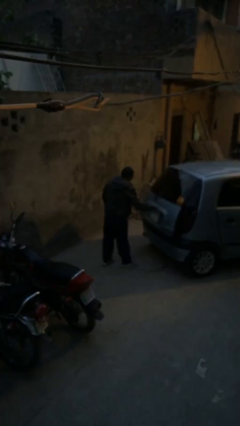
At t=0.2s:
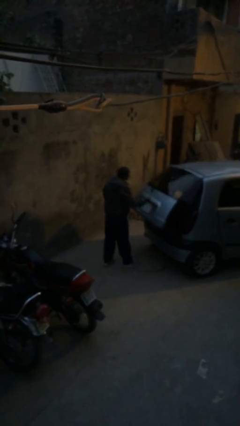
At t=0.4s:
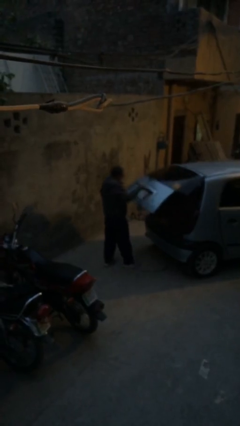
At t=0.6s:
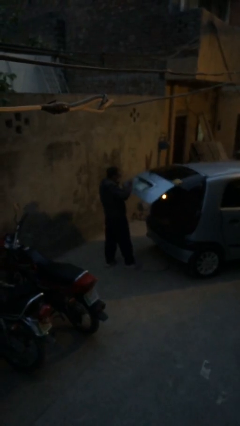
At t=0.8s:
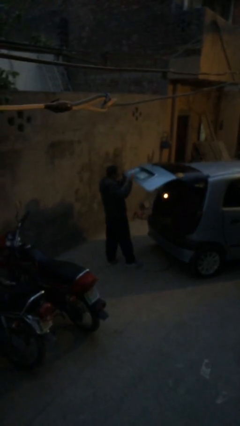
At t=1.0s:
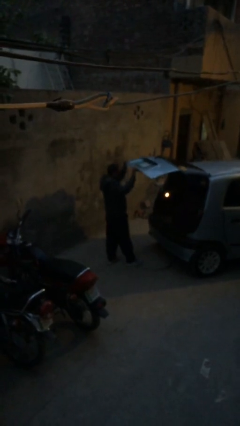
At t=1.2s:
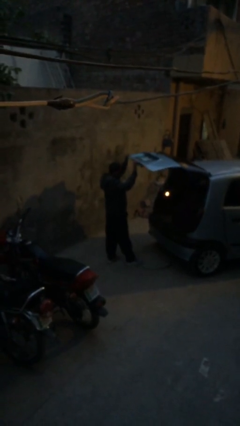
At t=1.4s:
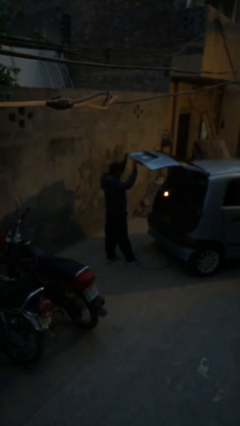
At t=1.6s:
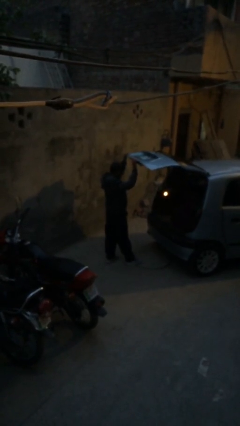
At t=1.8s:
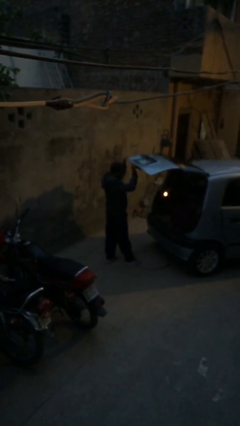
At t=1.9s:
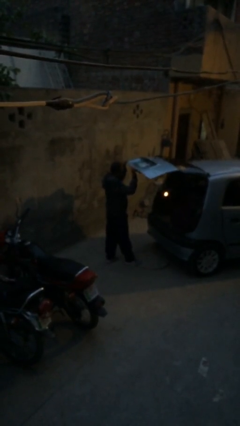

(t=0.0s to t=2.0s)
person opens car trunk

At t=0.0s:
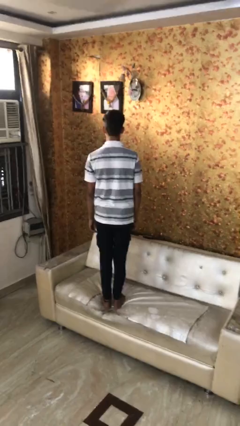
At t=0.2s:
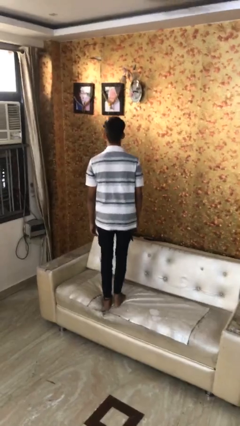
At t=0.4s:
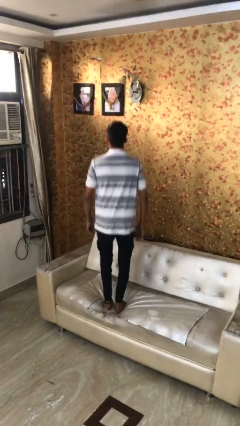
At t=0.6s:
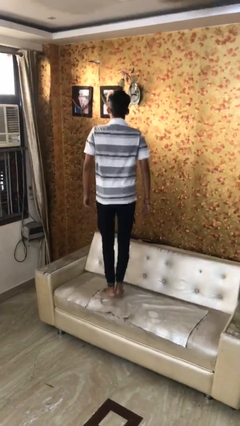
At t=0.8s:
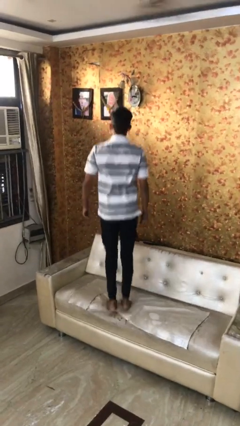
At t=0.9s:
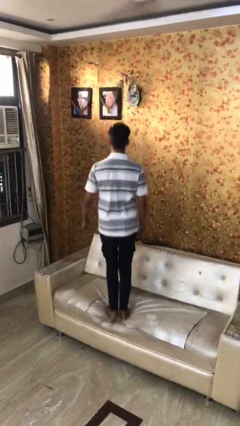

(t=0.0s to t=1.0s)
person jumps on bed

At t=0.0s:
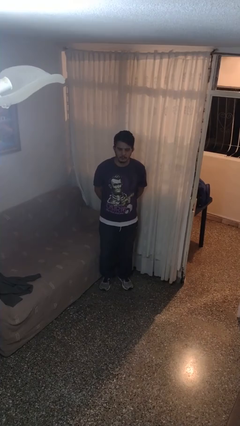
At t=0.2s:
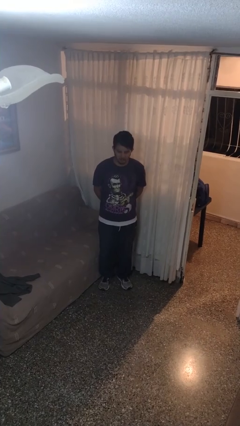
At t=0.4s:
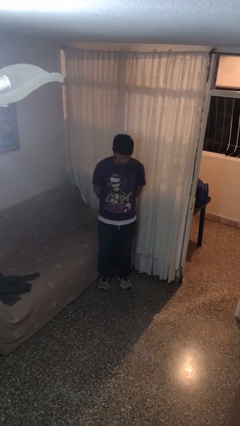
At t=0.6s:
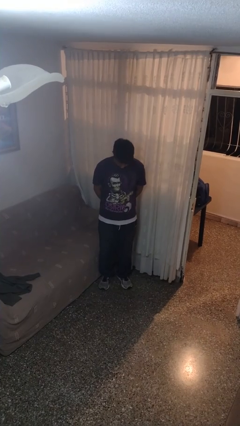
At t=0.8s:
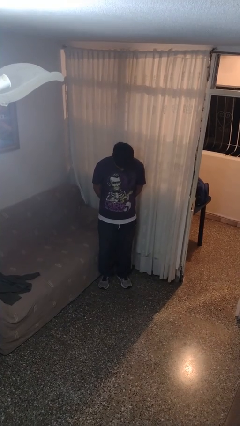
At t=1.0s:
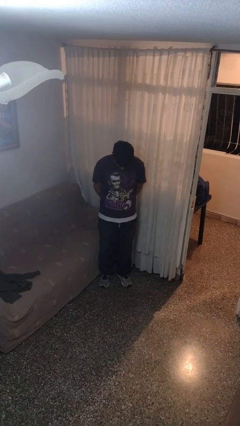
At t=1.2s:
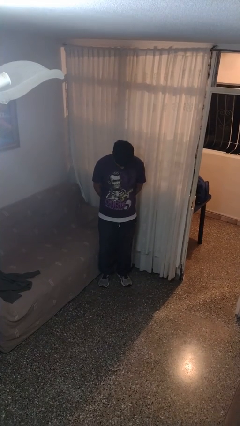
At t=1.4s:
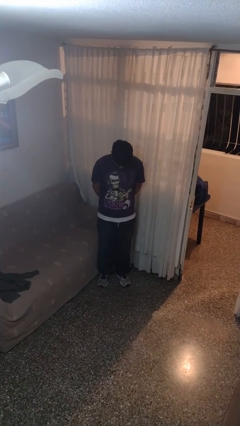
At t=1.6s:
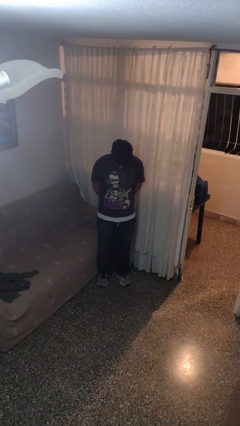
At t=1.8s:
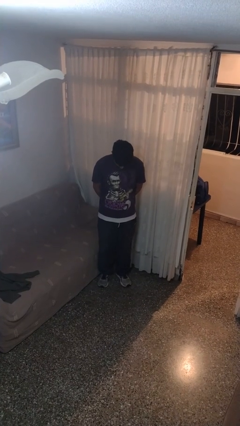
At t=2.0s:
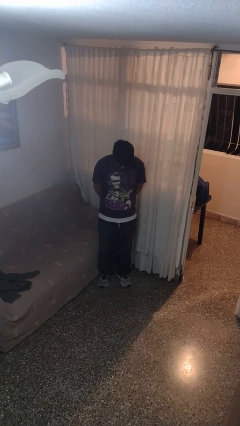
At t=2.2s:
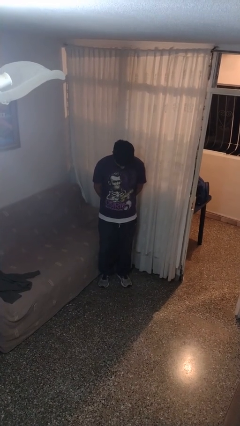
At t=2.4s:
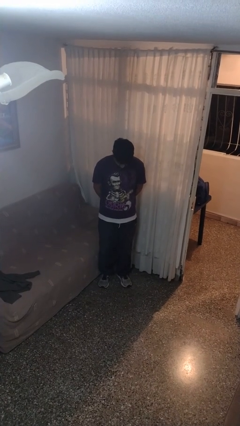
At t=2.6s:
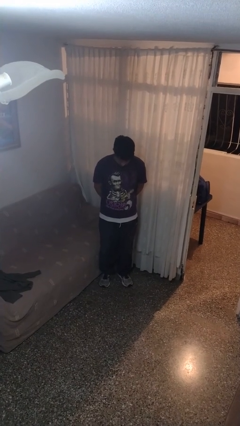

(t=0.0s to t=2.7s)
person prays

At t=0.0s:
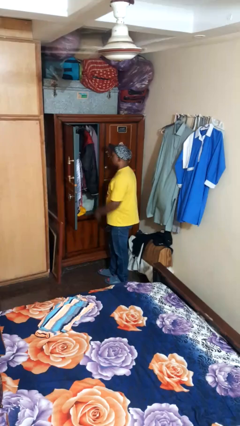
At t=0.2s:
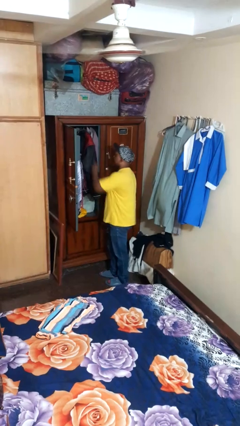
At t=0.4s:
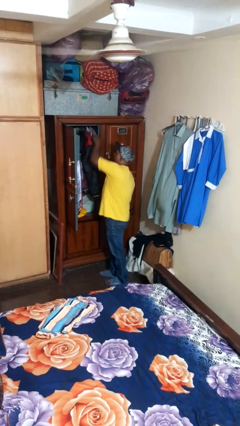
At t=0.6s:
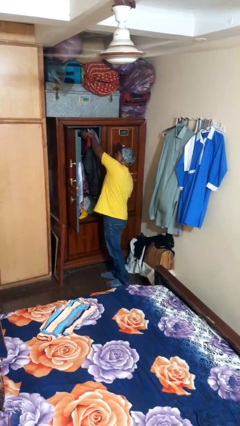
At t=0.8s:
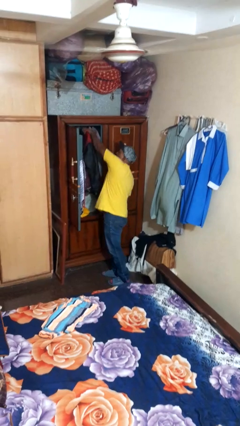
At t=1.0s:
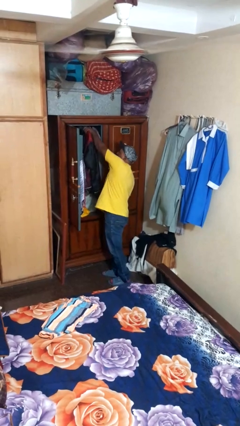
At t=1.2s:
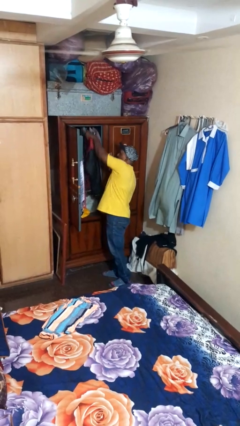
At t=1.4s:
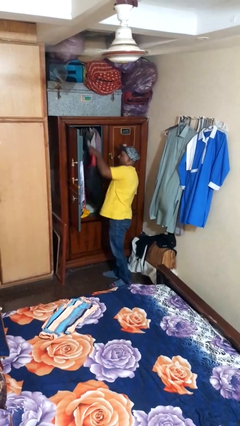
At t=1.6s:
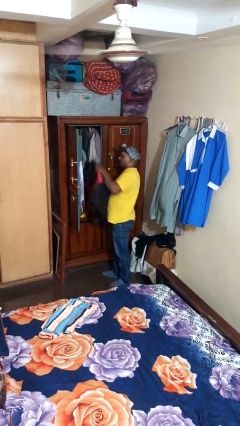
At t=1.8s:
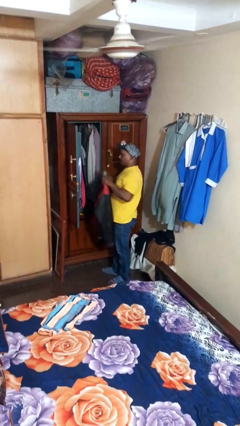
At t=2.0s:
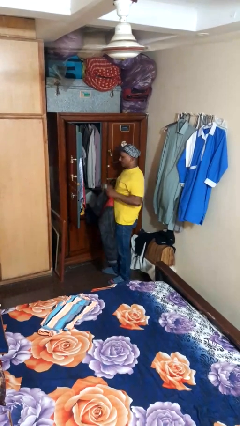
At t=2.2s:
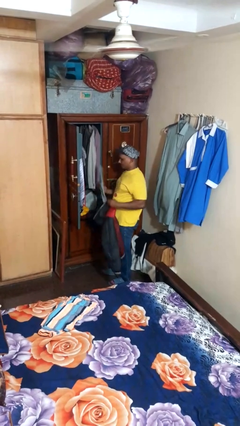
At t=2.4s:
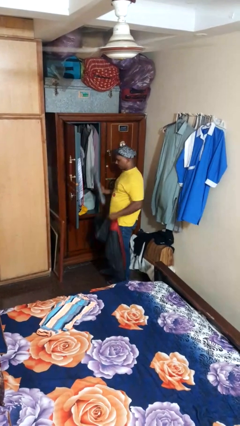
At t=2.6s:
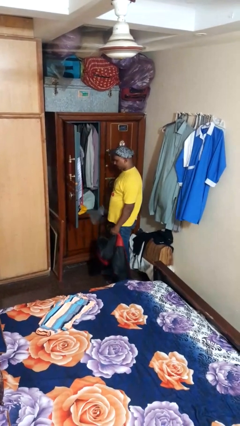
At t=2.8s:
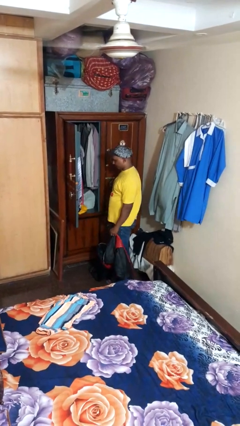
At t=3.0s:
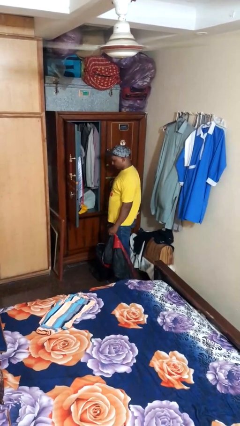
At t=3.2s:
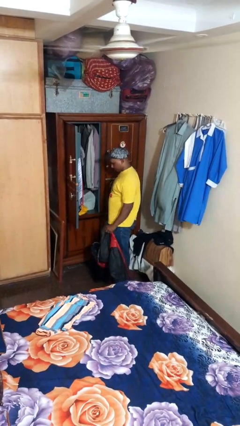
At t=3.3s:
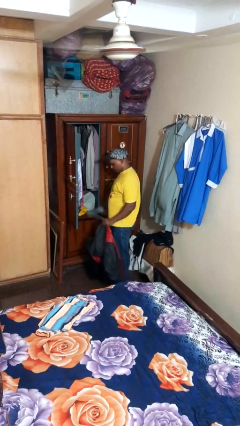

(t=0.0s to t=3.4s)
person takes clothes from closet

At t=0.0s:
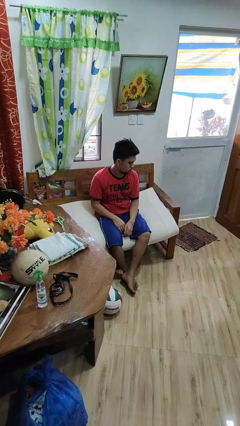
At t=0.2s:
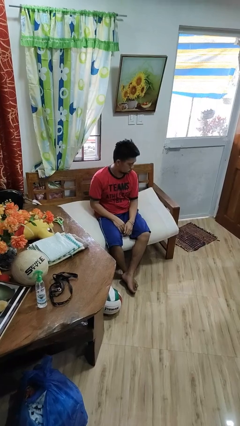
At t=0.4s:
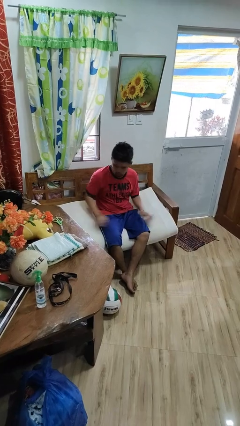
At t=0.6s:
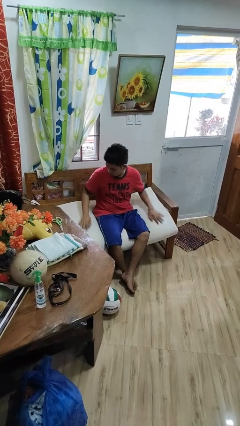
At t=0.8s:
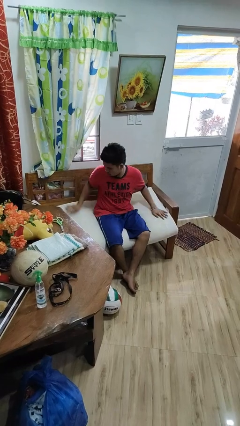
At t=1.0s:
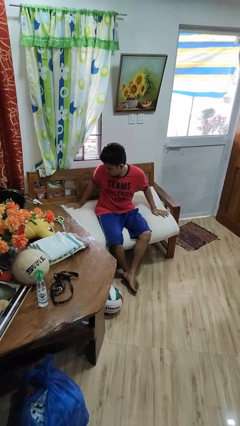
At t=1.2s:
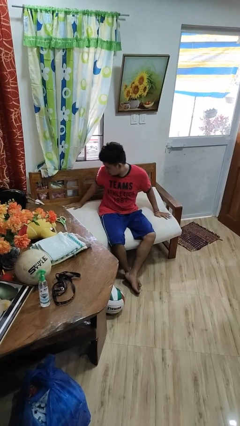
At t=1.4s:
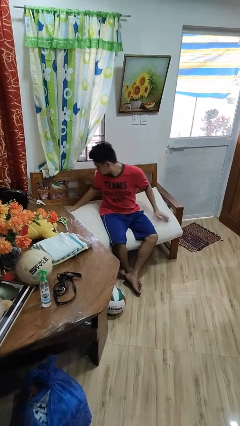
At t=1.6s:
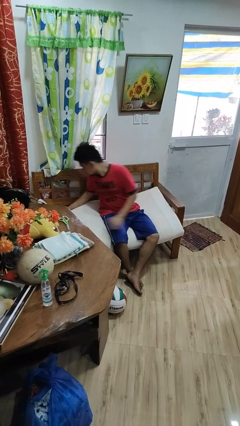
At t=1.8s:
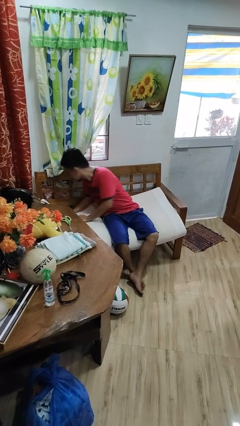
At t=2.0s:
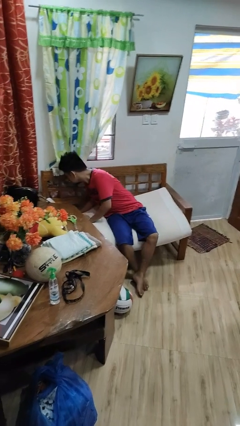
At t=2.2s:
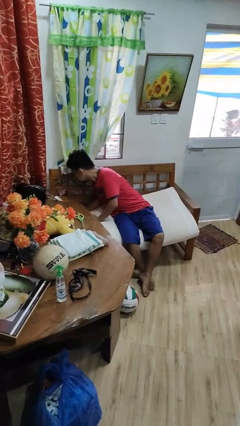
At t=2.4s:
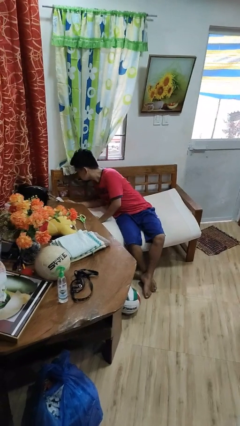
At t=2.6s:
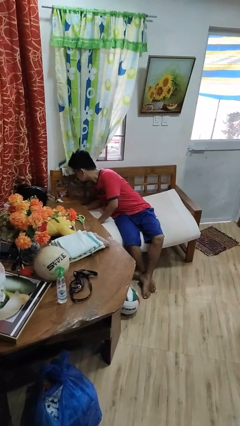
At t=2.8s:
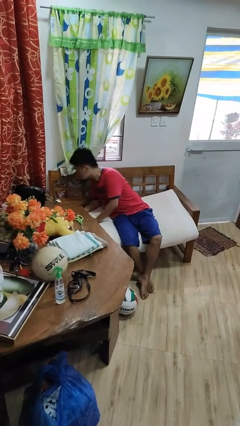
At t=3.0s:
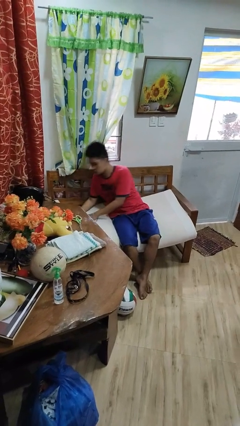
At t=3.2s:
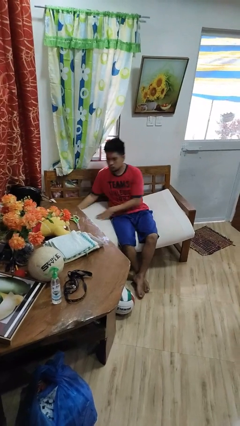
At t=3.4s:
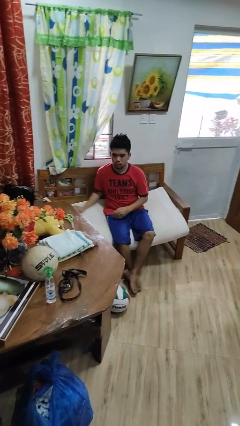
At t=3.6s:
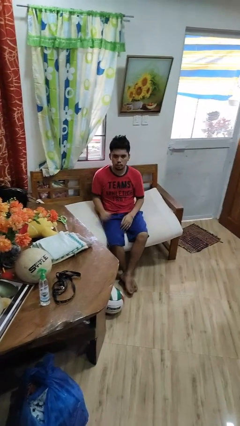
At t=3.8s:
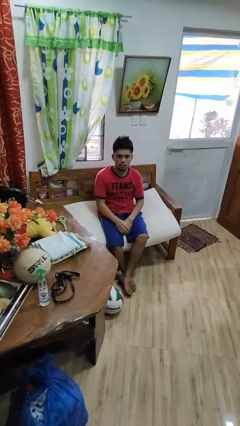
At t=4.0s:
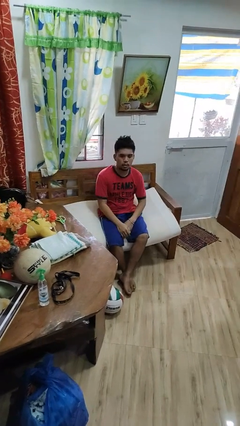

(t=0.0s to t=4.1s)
person searches in couch

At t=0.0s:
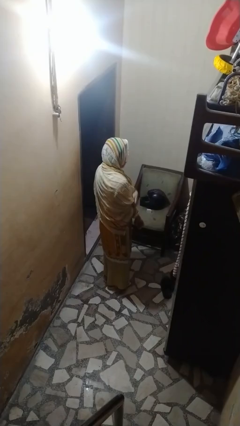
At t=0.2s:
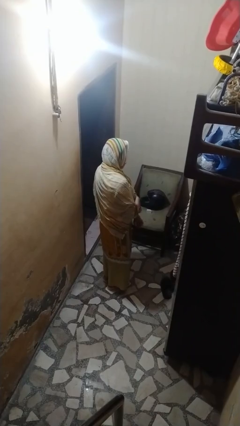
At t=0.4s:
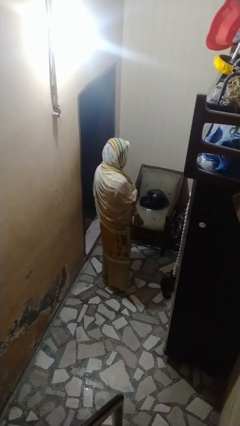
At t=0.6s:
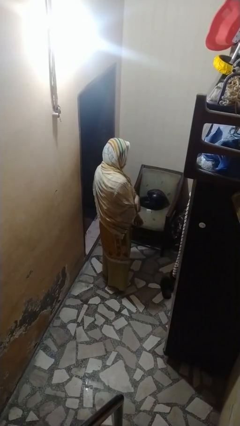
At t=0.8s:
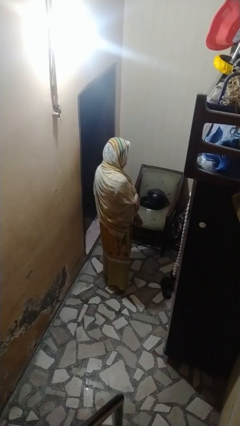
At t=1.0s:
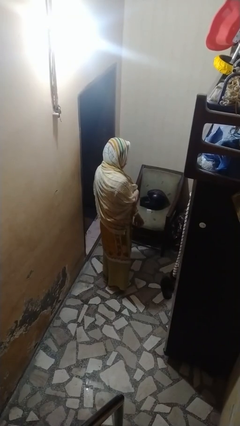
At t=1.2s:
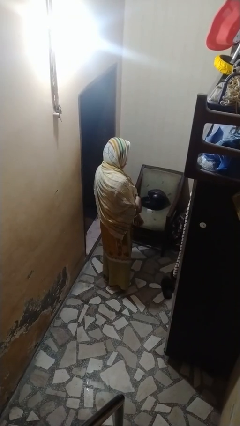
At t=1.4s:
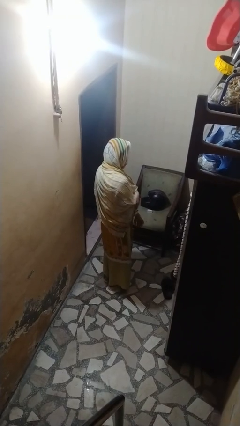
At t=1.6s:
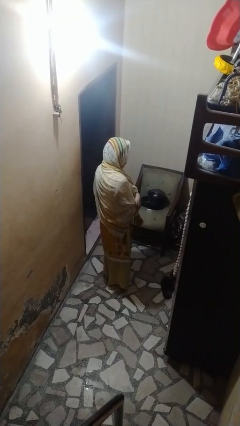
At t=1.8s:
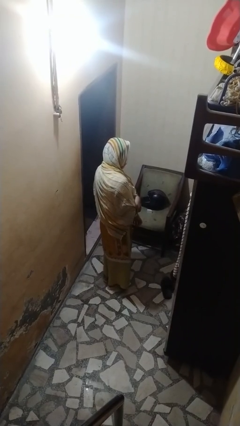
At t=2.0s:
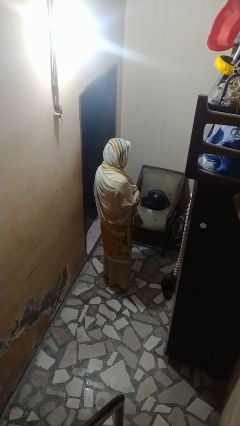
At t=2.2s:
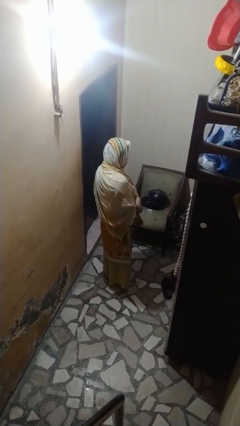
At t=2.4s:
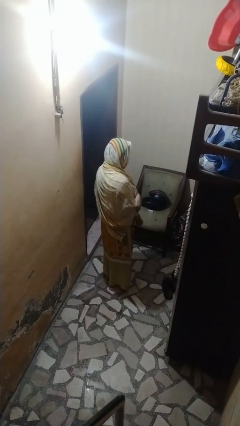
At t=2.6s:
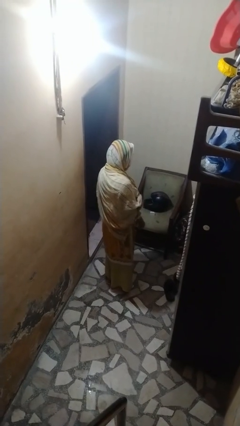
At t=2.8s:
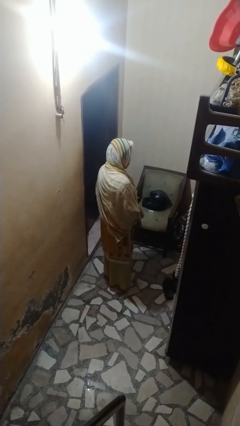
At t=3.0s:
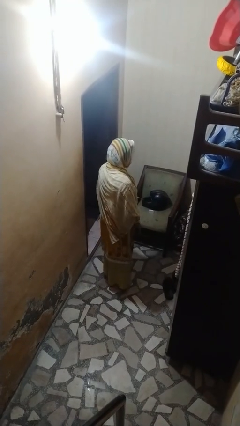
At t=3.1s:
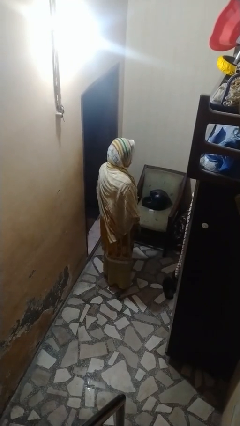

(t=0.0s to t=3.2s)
person scratches face

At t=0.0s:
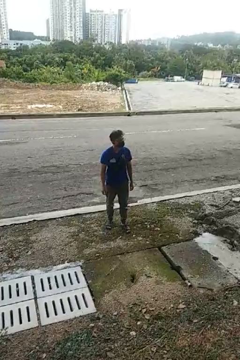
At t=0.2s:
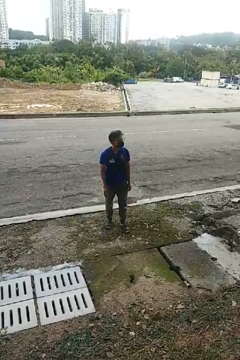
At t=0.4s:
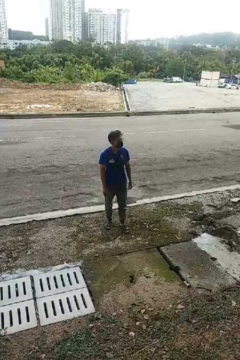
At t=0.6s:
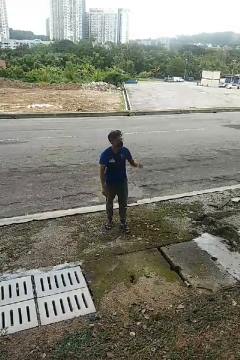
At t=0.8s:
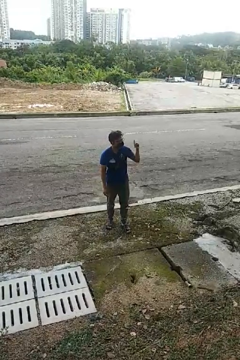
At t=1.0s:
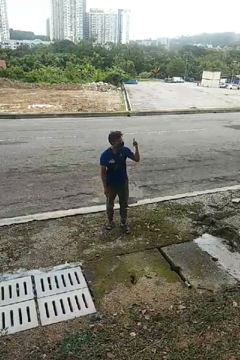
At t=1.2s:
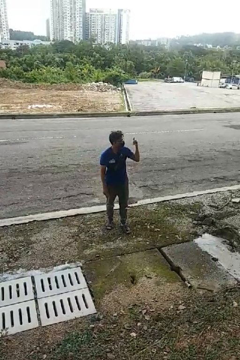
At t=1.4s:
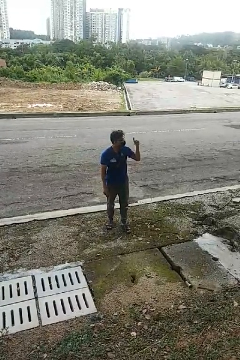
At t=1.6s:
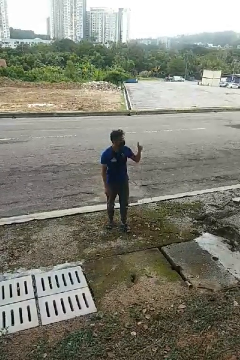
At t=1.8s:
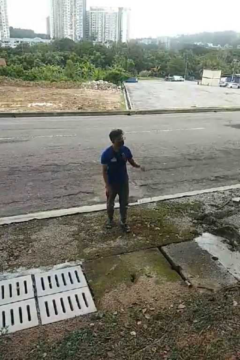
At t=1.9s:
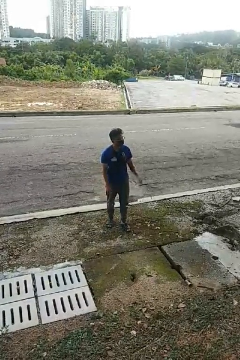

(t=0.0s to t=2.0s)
person gestures hang loose
